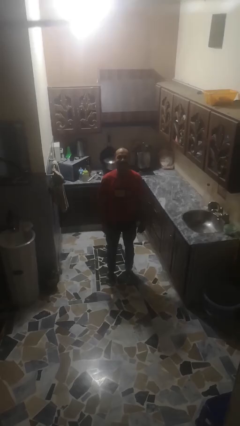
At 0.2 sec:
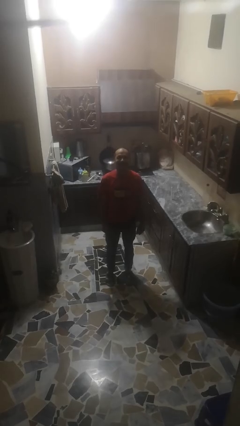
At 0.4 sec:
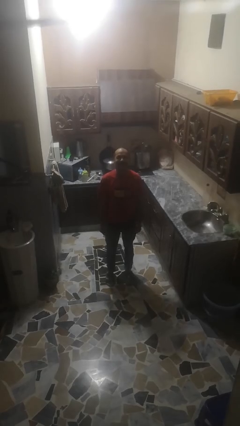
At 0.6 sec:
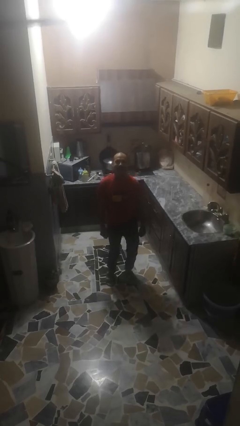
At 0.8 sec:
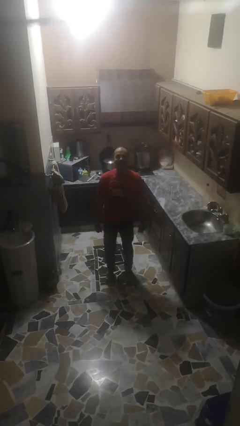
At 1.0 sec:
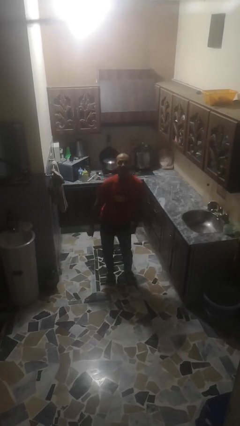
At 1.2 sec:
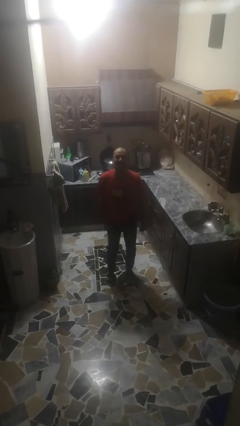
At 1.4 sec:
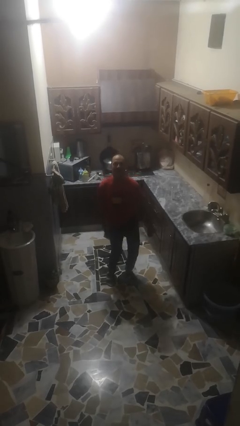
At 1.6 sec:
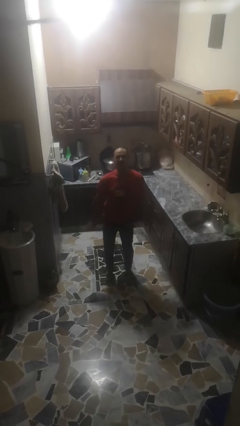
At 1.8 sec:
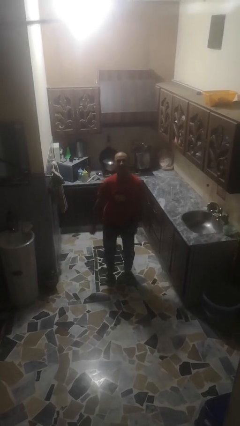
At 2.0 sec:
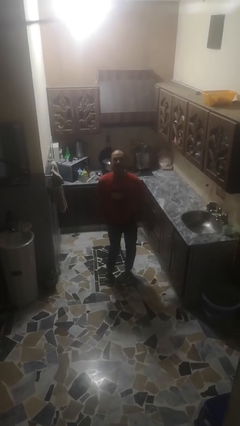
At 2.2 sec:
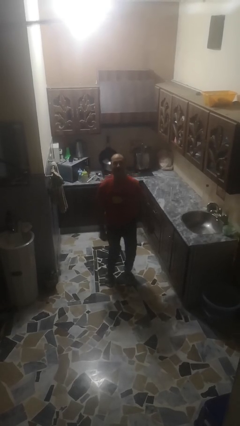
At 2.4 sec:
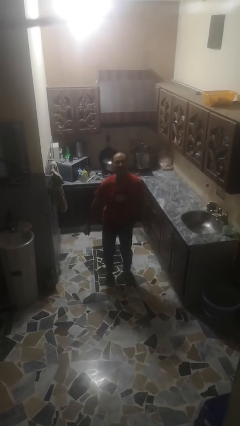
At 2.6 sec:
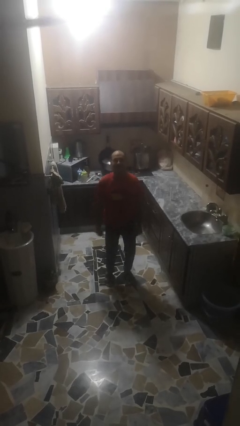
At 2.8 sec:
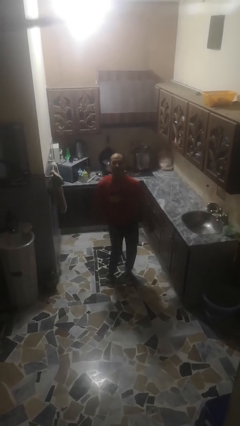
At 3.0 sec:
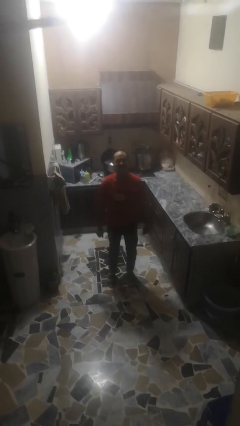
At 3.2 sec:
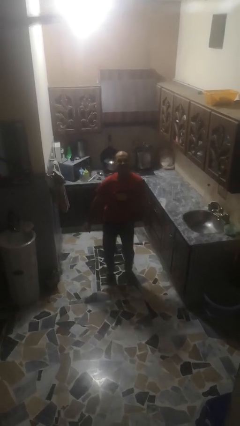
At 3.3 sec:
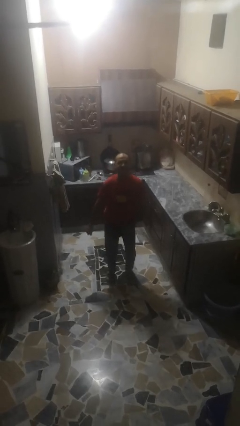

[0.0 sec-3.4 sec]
person wiggles hips

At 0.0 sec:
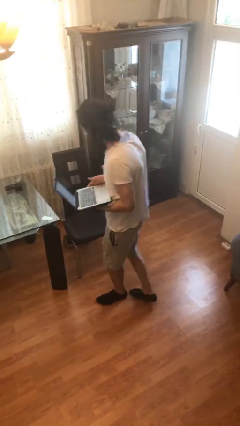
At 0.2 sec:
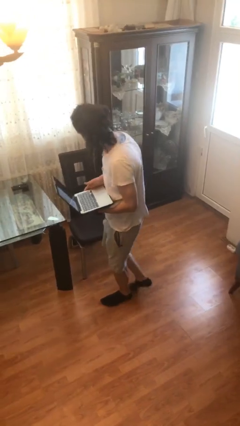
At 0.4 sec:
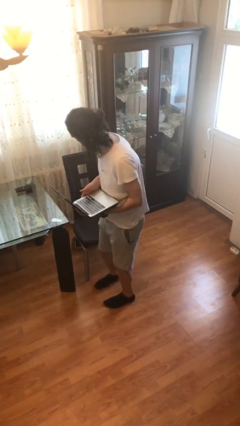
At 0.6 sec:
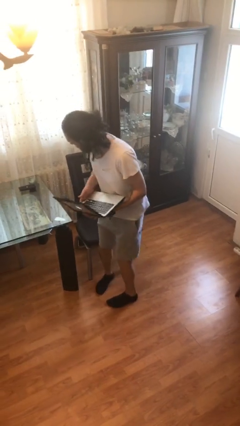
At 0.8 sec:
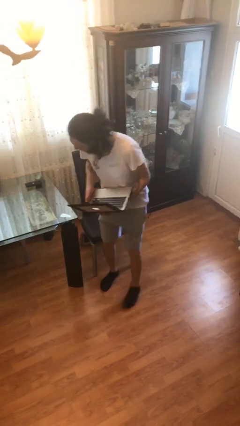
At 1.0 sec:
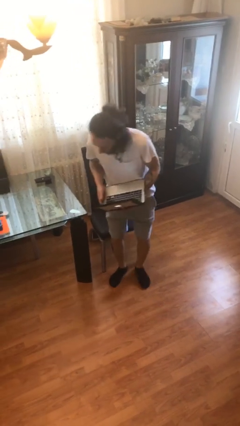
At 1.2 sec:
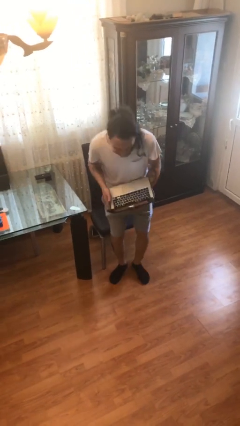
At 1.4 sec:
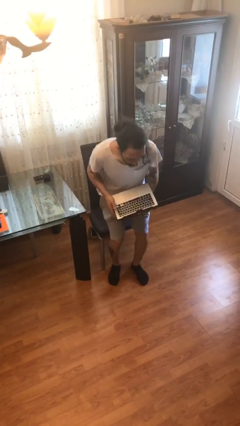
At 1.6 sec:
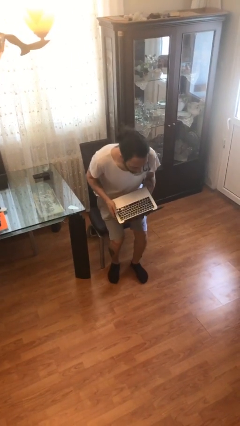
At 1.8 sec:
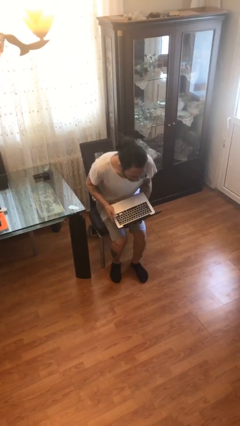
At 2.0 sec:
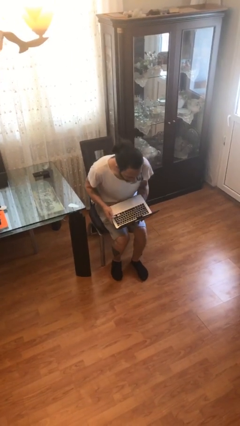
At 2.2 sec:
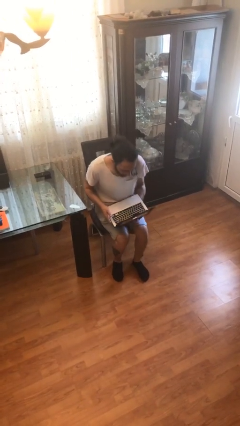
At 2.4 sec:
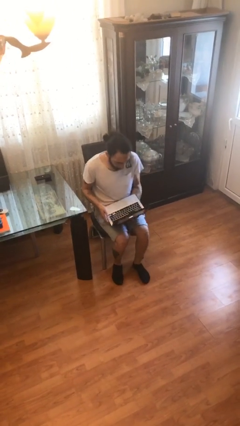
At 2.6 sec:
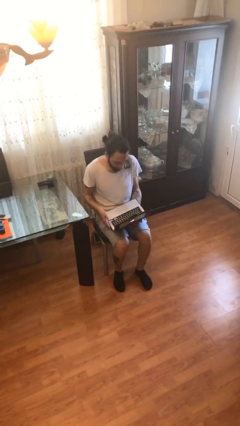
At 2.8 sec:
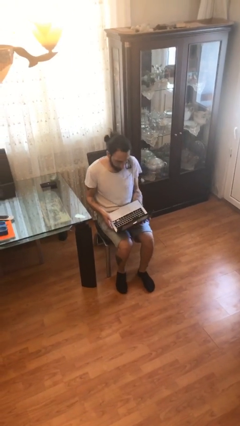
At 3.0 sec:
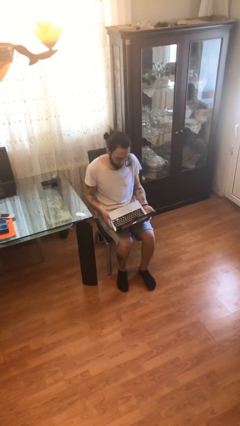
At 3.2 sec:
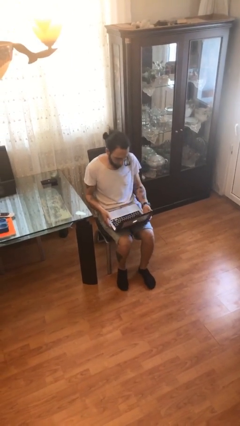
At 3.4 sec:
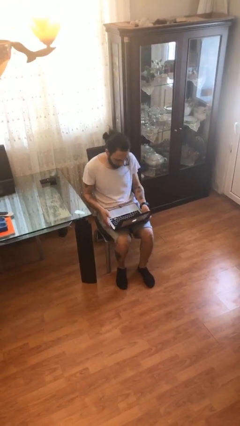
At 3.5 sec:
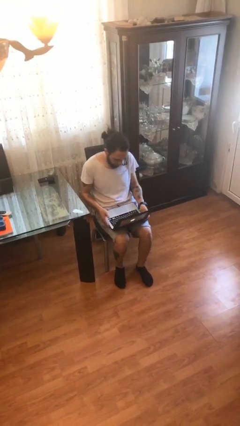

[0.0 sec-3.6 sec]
person sits down

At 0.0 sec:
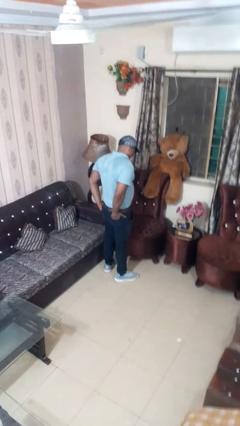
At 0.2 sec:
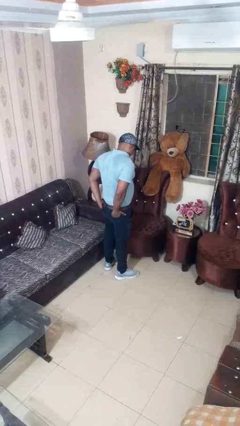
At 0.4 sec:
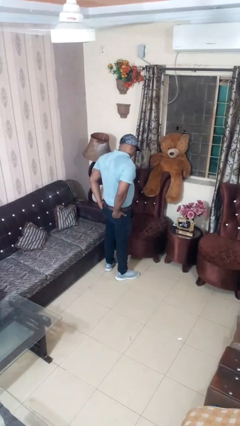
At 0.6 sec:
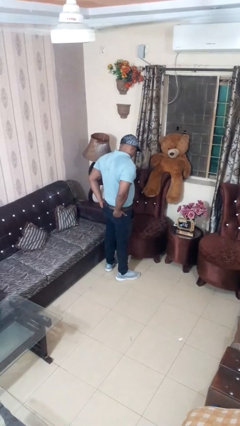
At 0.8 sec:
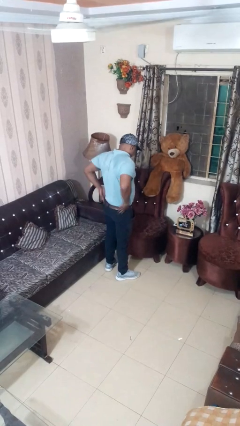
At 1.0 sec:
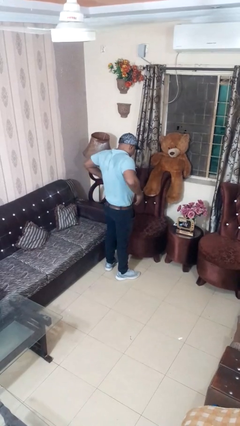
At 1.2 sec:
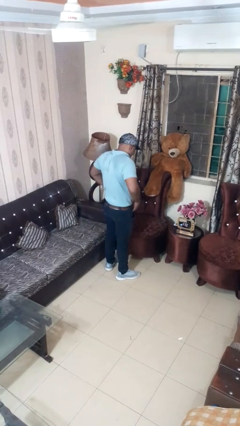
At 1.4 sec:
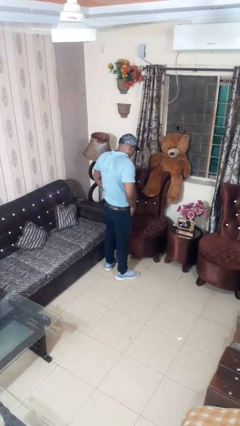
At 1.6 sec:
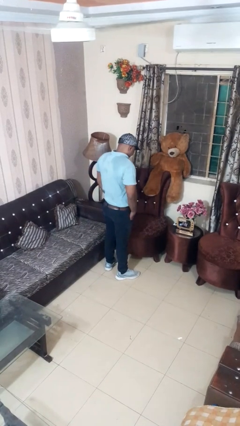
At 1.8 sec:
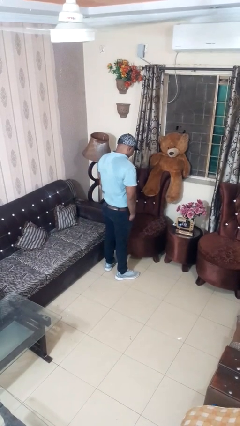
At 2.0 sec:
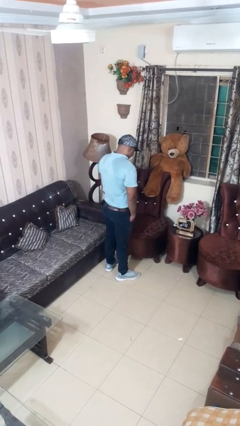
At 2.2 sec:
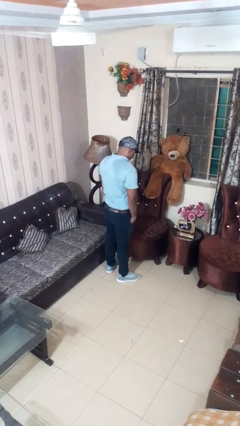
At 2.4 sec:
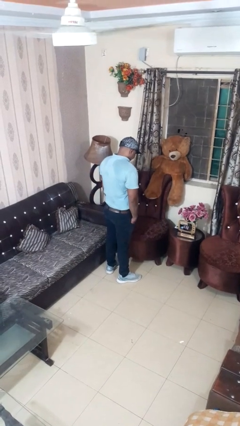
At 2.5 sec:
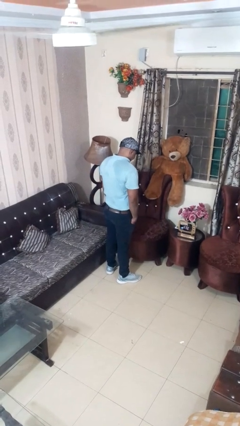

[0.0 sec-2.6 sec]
person puts hands in back pockets

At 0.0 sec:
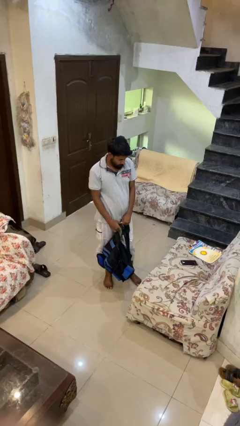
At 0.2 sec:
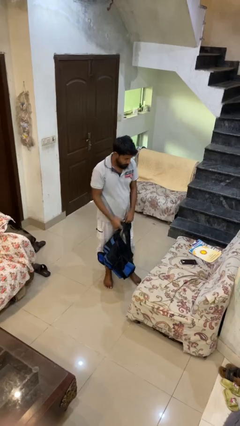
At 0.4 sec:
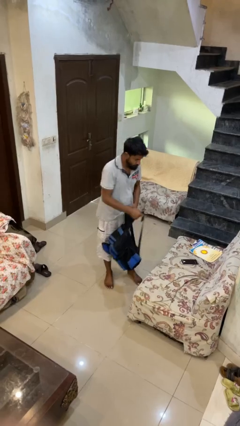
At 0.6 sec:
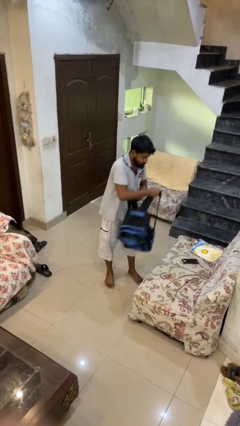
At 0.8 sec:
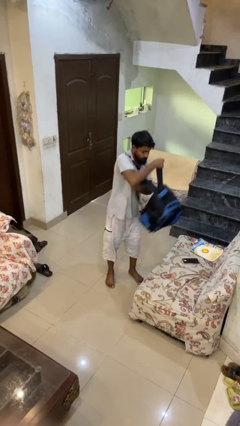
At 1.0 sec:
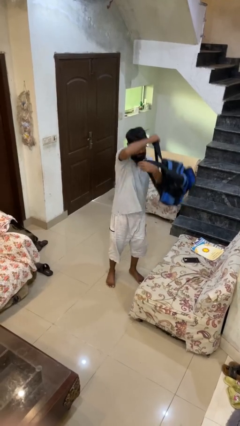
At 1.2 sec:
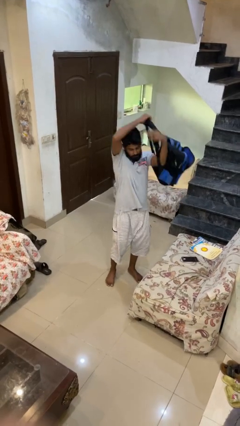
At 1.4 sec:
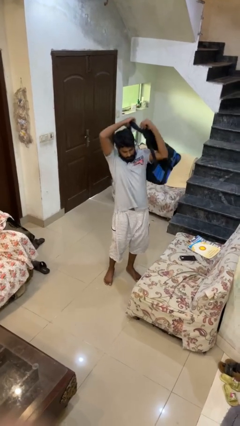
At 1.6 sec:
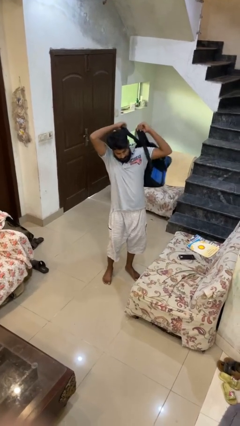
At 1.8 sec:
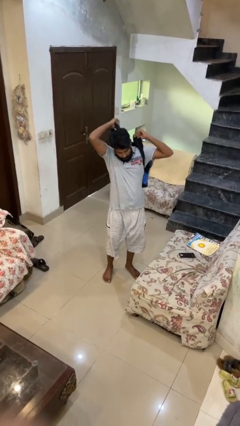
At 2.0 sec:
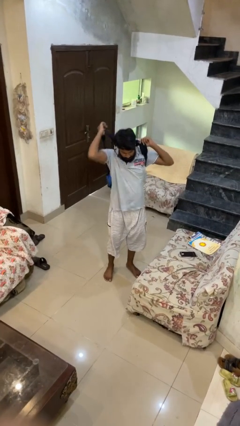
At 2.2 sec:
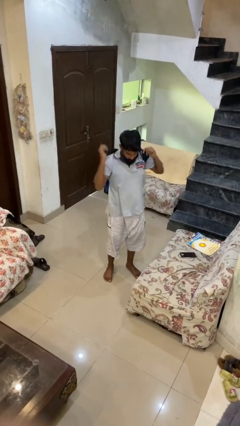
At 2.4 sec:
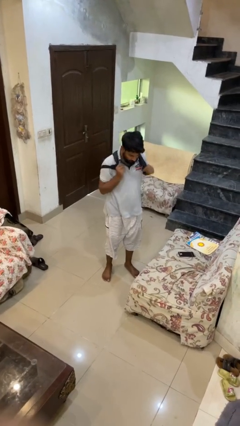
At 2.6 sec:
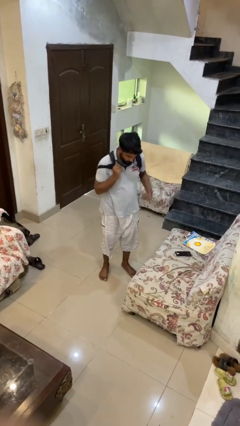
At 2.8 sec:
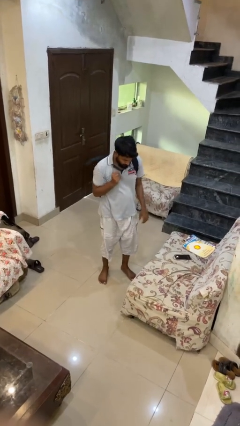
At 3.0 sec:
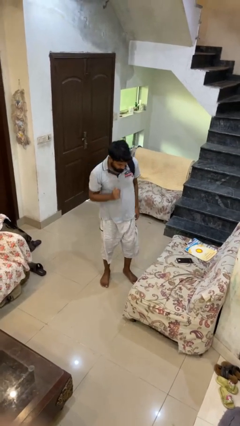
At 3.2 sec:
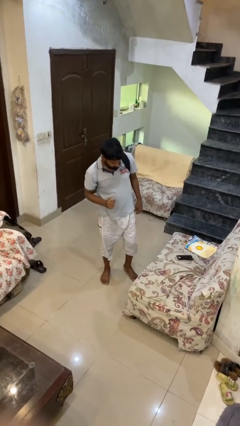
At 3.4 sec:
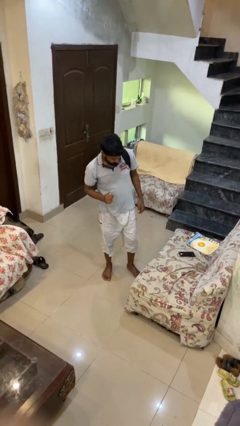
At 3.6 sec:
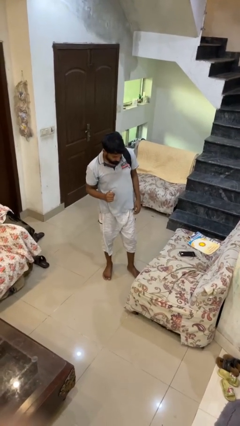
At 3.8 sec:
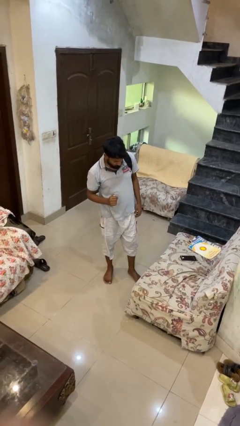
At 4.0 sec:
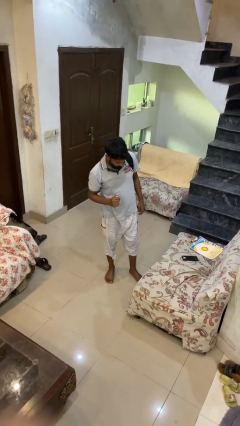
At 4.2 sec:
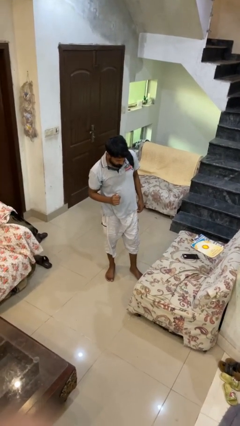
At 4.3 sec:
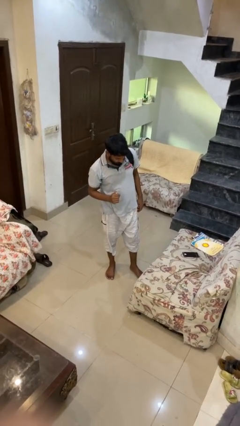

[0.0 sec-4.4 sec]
person puts on backpack

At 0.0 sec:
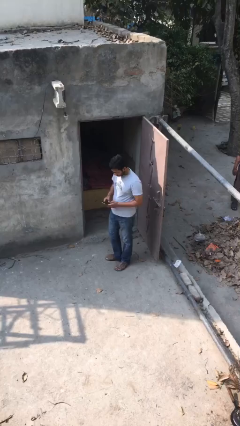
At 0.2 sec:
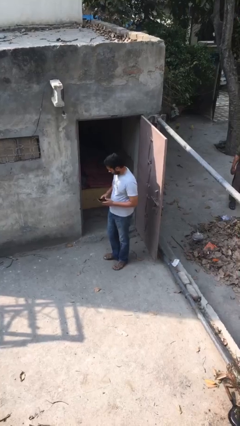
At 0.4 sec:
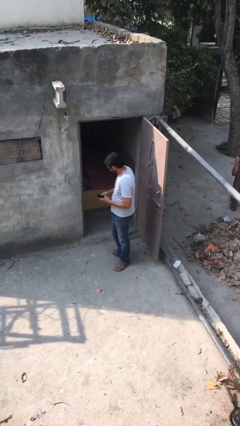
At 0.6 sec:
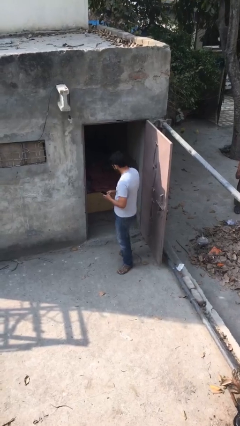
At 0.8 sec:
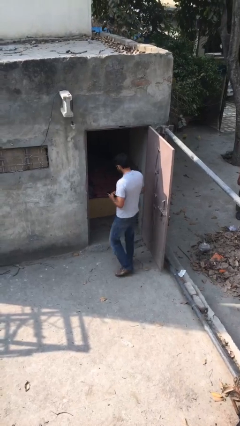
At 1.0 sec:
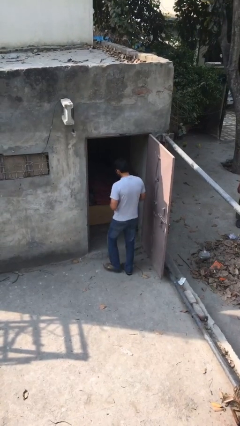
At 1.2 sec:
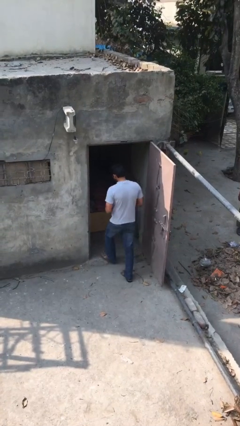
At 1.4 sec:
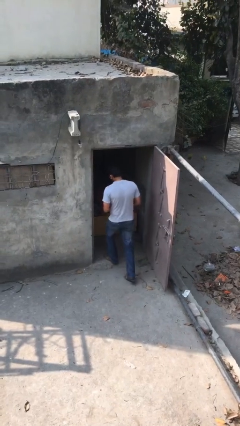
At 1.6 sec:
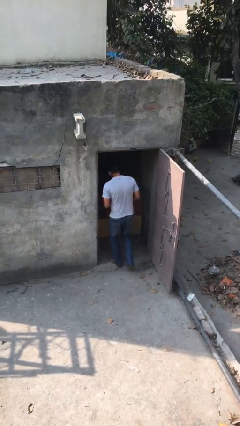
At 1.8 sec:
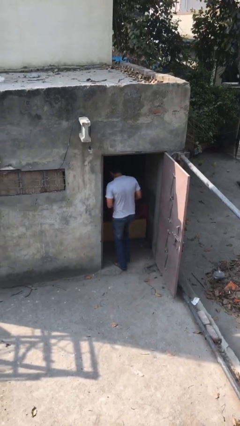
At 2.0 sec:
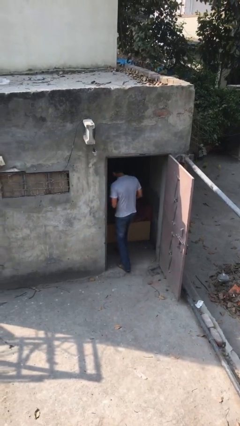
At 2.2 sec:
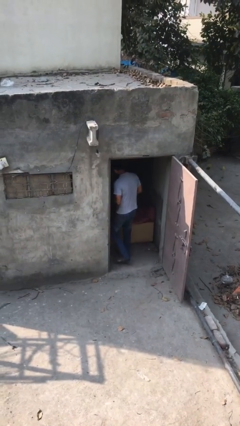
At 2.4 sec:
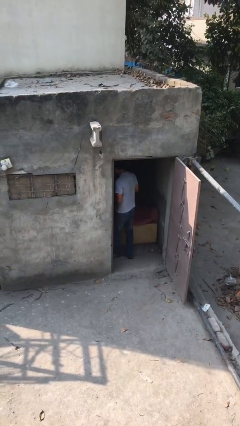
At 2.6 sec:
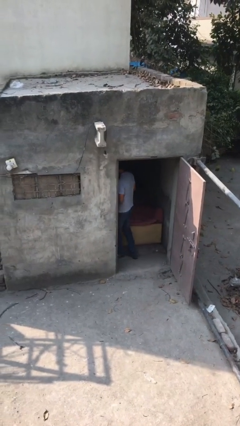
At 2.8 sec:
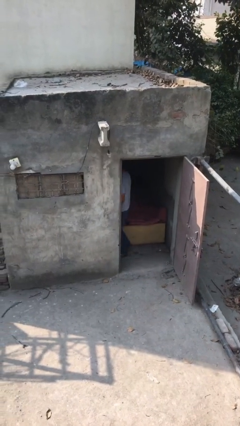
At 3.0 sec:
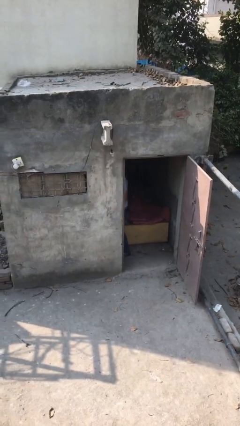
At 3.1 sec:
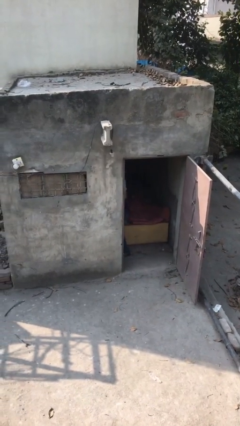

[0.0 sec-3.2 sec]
person exits scene through structure

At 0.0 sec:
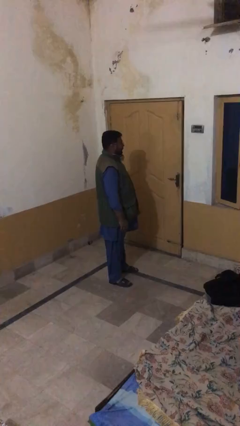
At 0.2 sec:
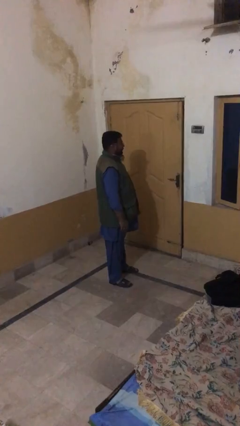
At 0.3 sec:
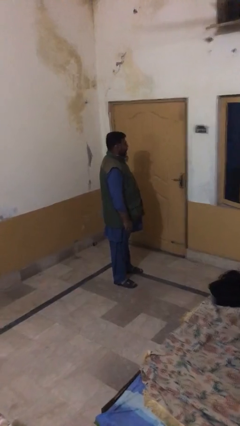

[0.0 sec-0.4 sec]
person closes facility door
